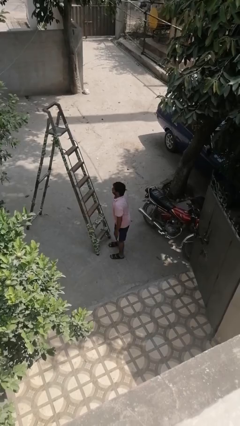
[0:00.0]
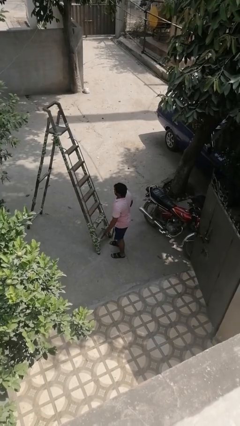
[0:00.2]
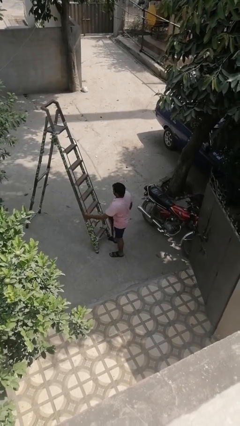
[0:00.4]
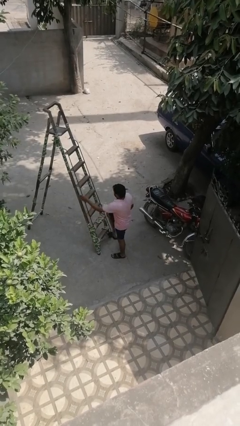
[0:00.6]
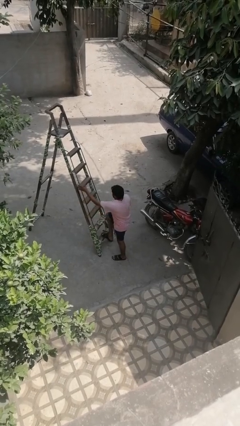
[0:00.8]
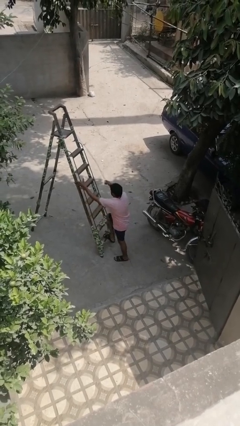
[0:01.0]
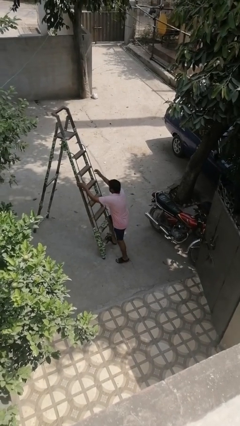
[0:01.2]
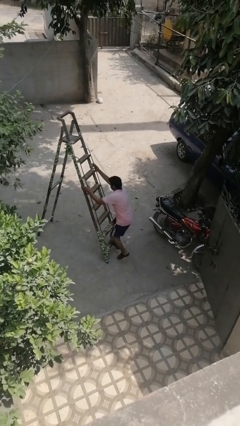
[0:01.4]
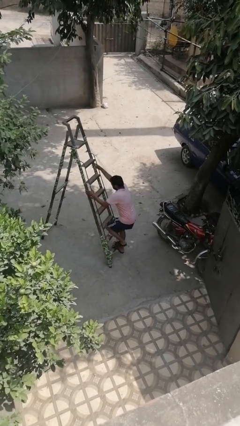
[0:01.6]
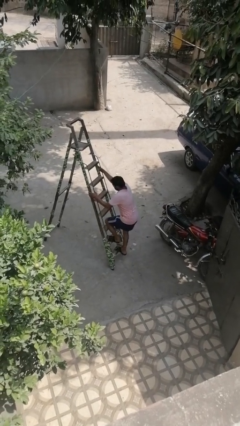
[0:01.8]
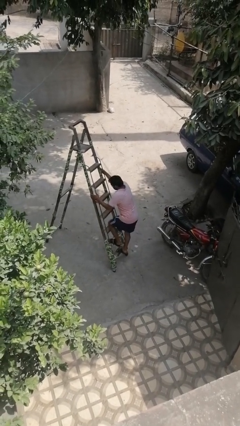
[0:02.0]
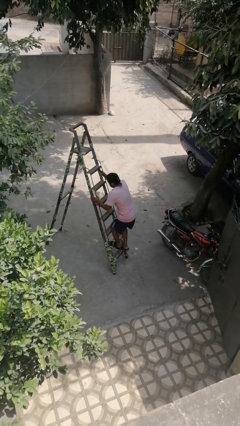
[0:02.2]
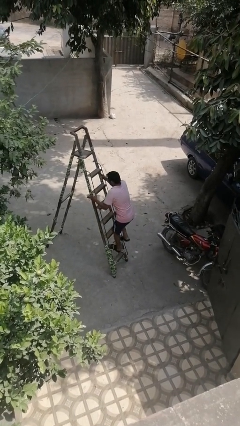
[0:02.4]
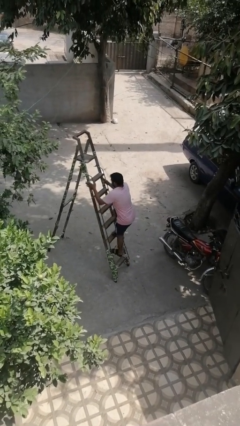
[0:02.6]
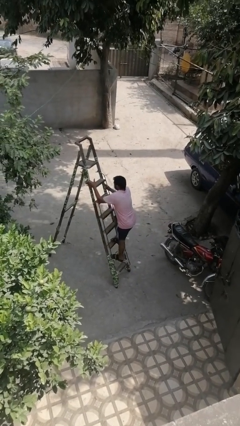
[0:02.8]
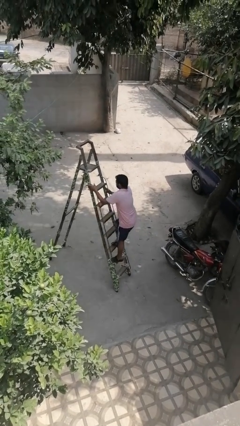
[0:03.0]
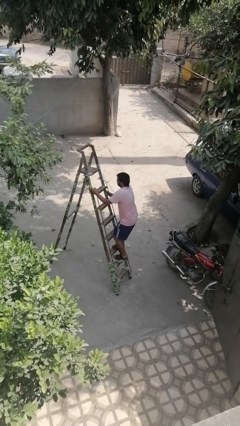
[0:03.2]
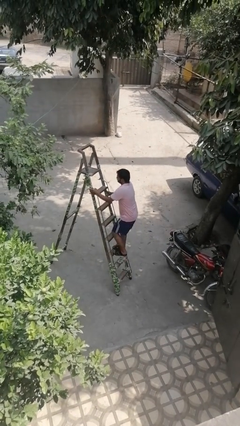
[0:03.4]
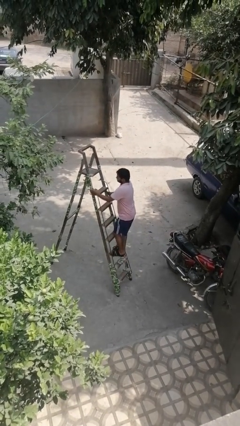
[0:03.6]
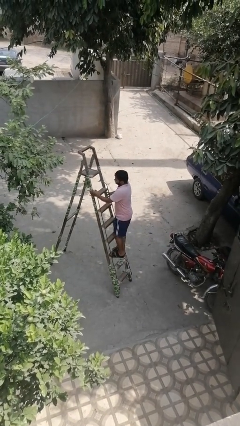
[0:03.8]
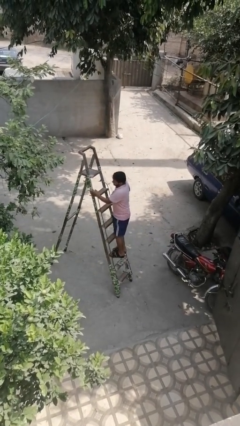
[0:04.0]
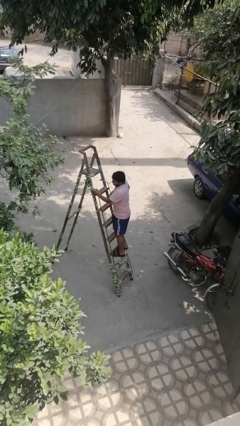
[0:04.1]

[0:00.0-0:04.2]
person climbs up ladder

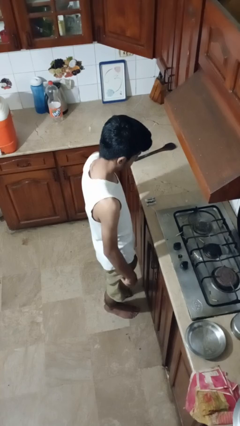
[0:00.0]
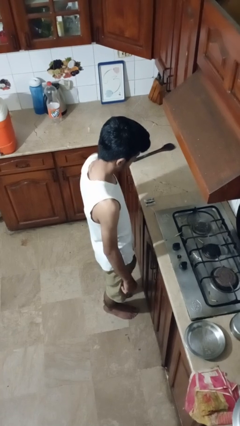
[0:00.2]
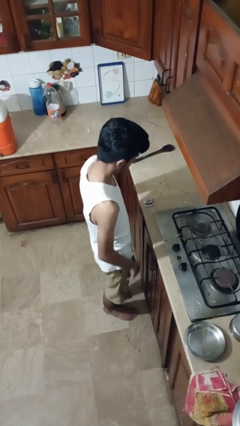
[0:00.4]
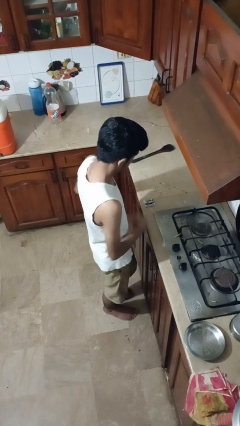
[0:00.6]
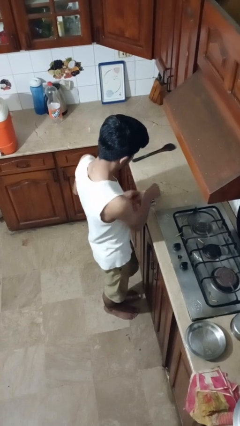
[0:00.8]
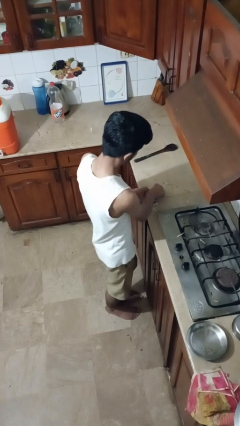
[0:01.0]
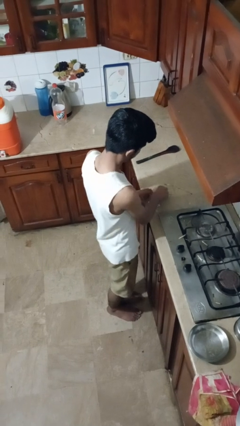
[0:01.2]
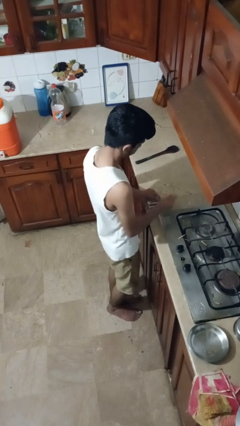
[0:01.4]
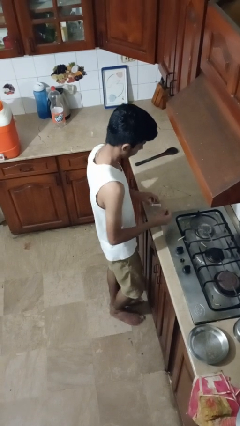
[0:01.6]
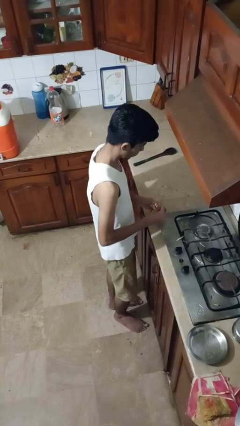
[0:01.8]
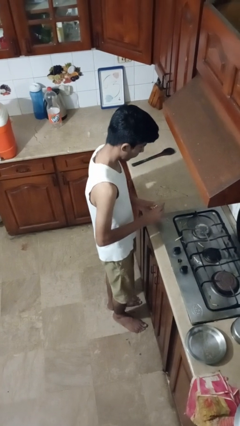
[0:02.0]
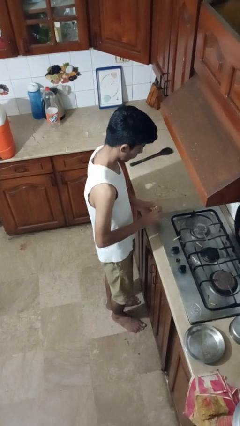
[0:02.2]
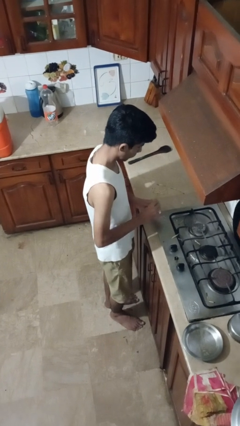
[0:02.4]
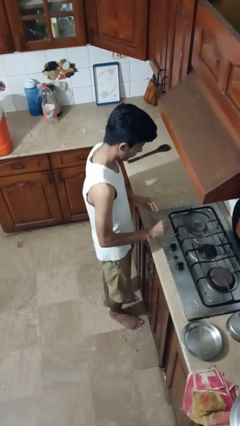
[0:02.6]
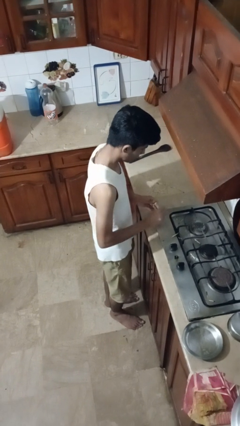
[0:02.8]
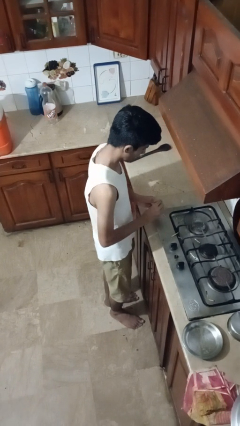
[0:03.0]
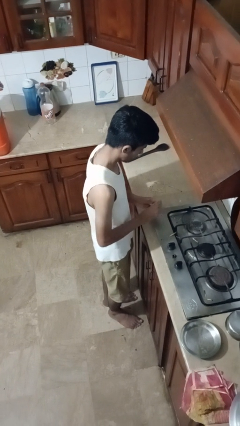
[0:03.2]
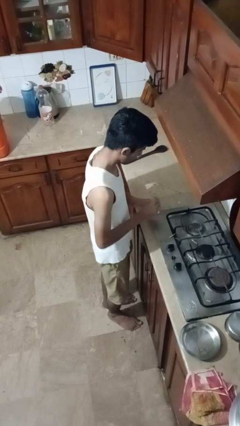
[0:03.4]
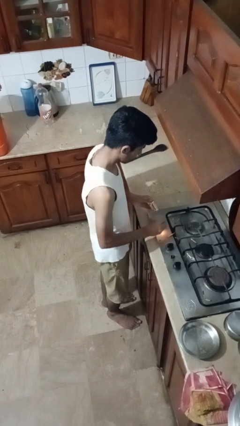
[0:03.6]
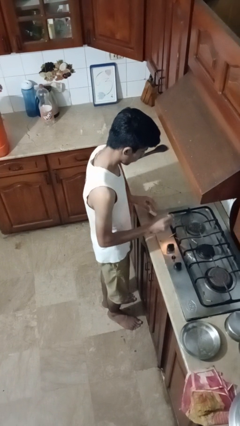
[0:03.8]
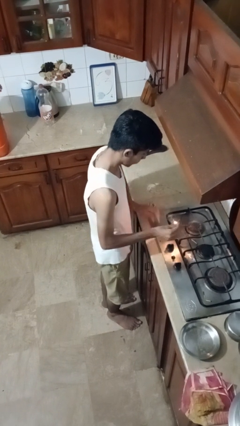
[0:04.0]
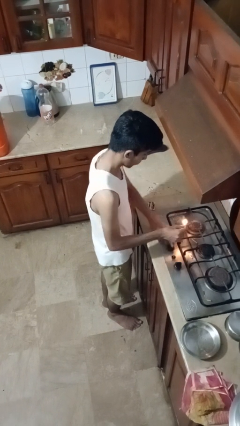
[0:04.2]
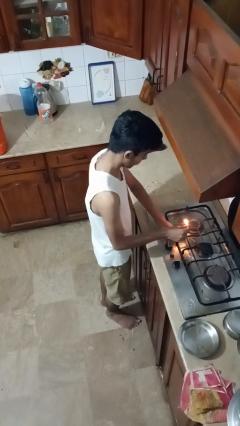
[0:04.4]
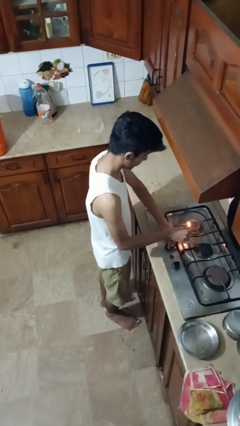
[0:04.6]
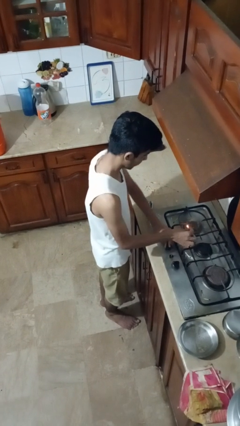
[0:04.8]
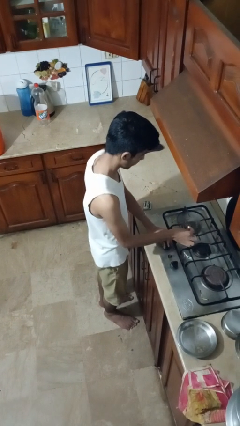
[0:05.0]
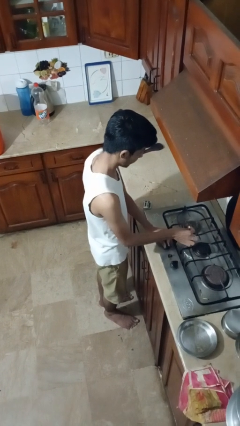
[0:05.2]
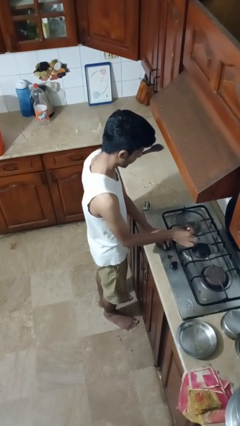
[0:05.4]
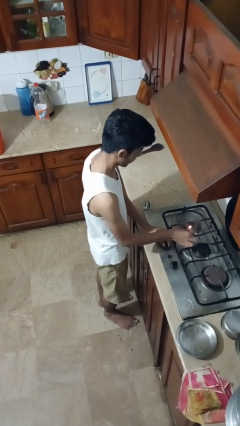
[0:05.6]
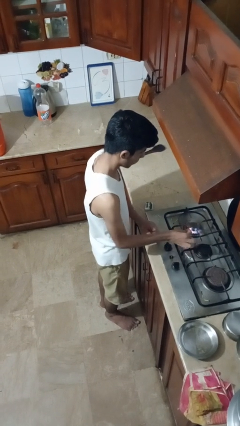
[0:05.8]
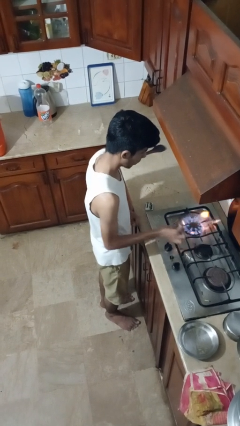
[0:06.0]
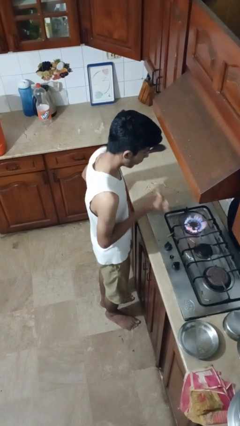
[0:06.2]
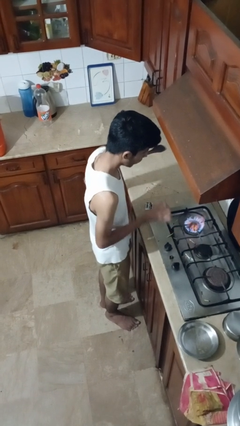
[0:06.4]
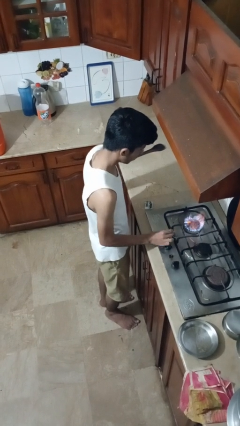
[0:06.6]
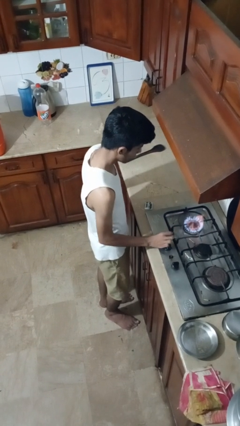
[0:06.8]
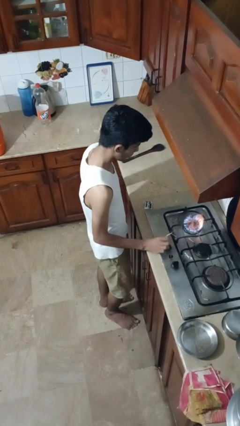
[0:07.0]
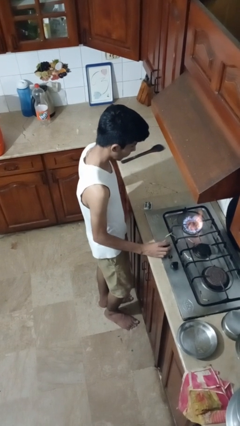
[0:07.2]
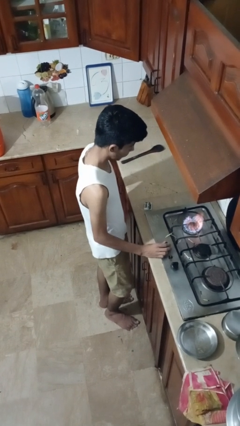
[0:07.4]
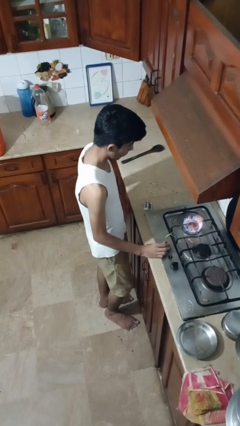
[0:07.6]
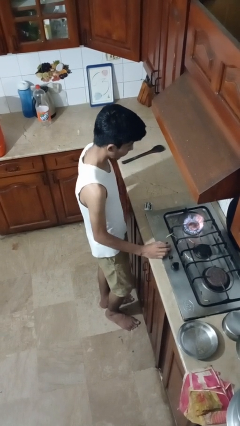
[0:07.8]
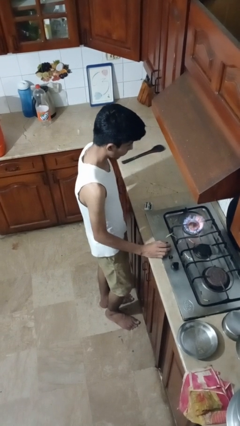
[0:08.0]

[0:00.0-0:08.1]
person turns on stovetop

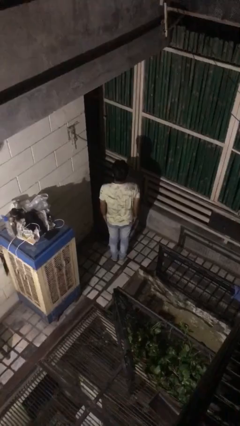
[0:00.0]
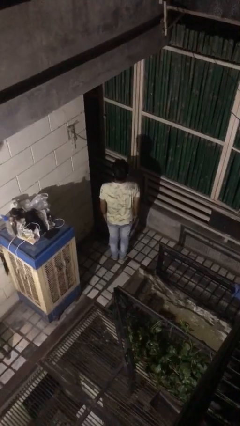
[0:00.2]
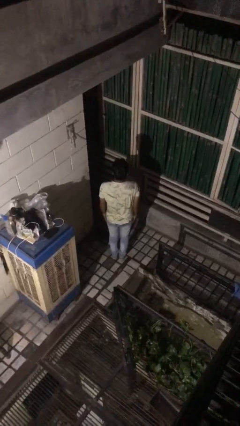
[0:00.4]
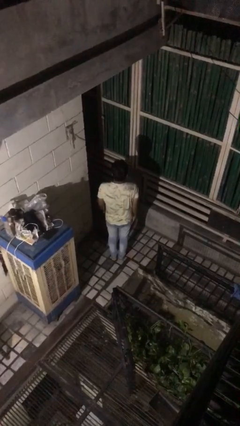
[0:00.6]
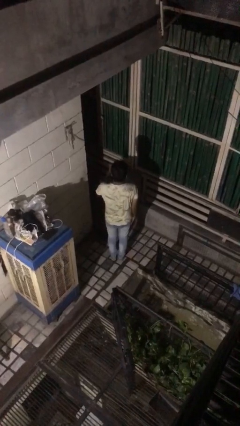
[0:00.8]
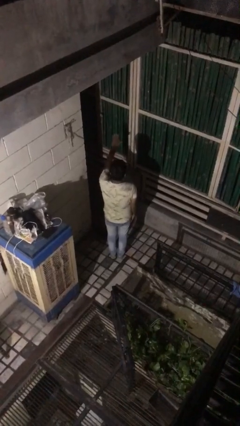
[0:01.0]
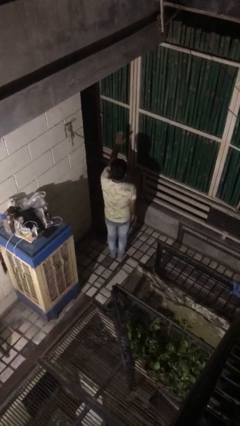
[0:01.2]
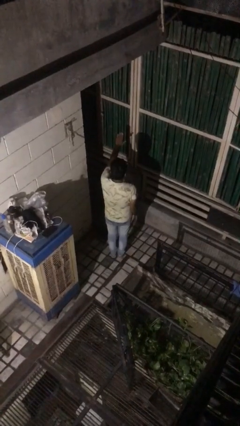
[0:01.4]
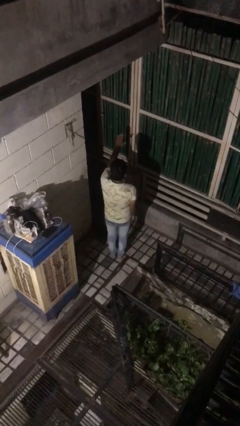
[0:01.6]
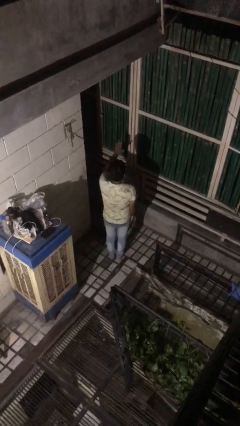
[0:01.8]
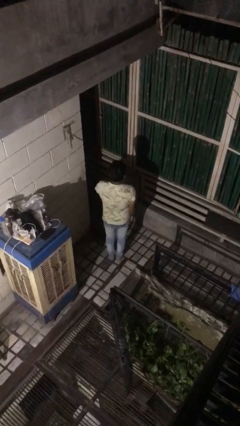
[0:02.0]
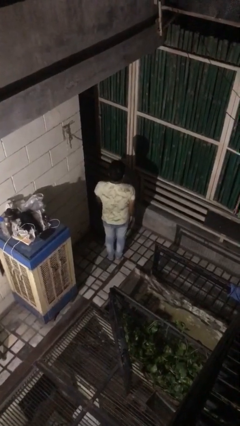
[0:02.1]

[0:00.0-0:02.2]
person gestures stop

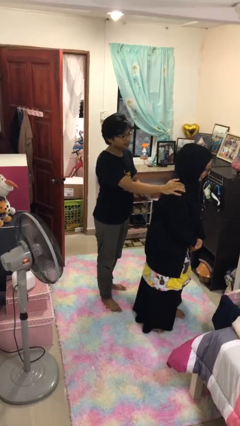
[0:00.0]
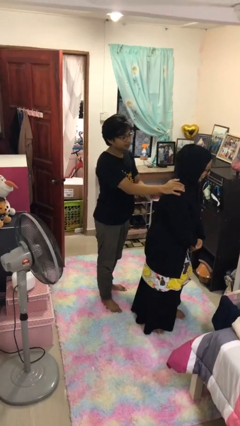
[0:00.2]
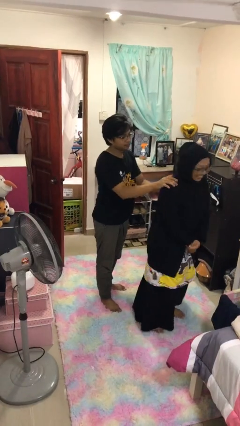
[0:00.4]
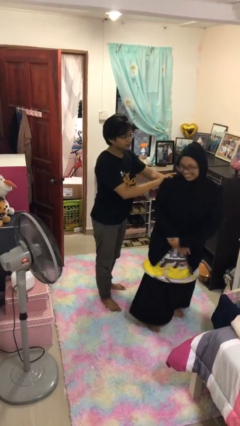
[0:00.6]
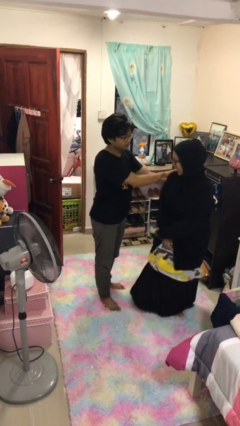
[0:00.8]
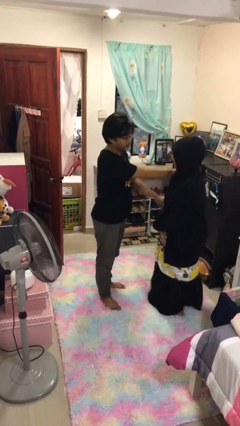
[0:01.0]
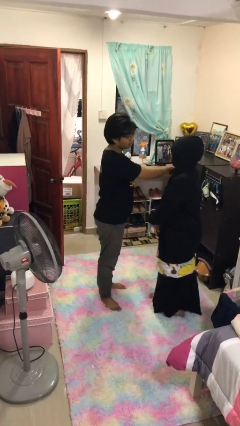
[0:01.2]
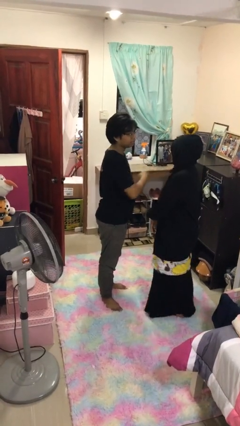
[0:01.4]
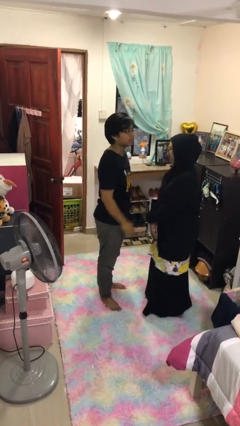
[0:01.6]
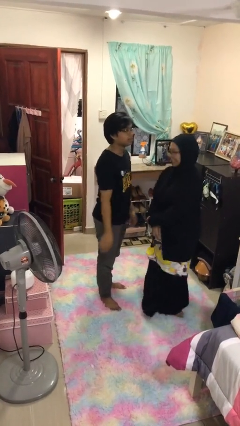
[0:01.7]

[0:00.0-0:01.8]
person spins person around

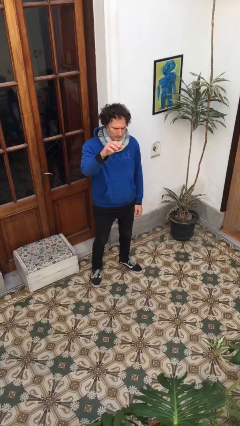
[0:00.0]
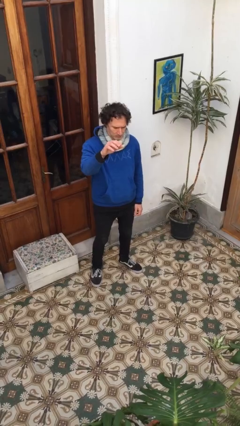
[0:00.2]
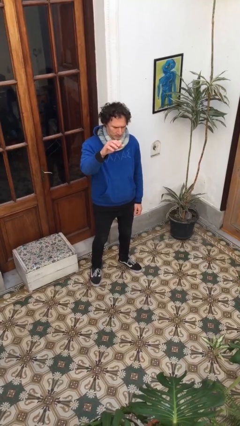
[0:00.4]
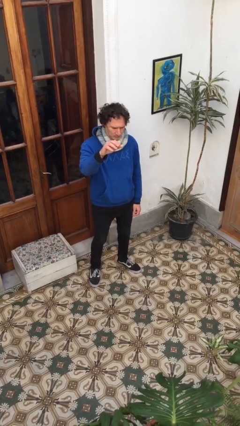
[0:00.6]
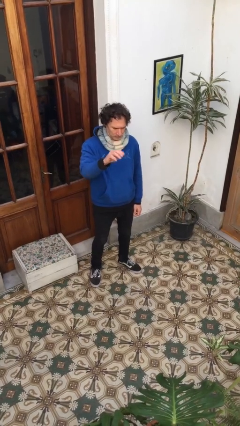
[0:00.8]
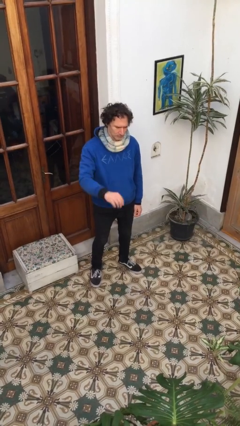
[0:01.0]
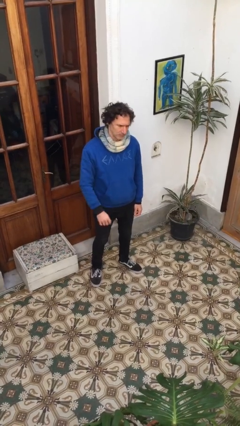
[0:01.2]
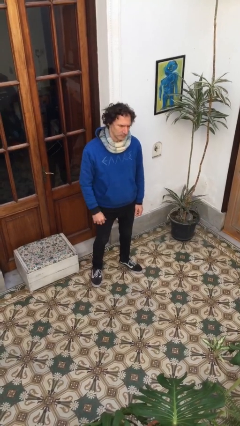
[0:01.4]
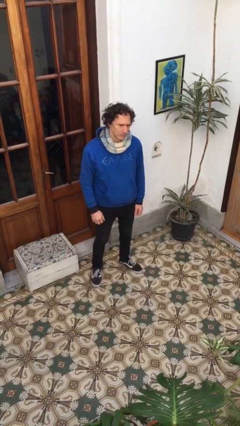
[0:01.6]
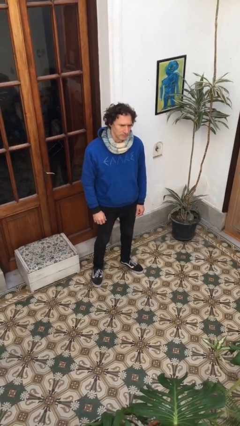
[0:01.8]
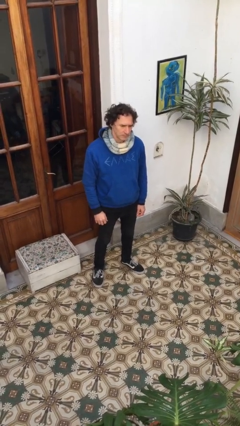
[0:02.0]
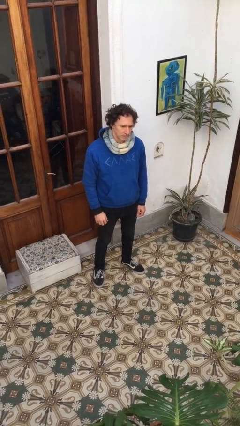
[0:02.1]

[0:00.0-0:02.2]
person gestures swipe down
